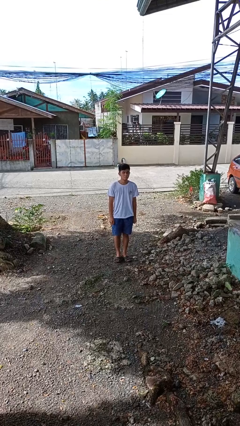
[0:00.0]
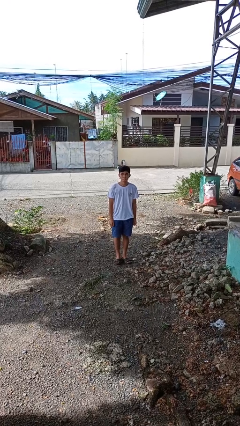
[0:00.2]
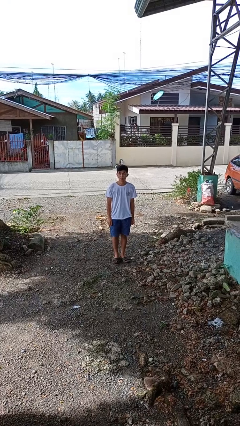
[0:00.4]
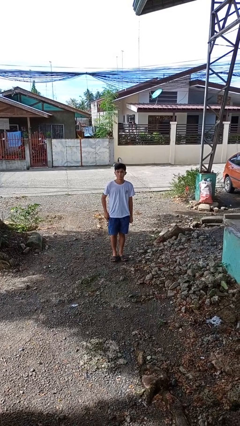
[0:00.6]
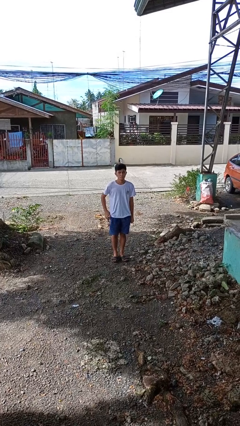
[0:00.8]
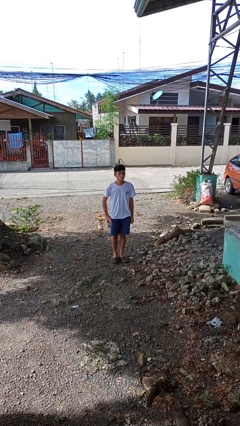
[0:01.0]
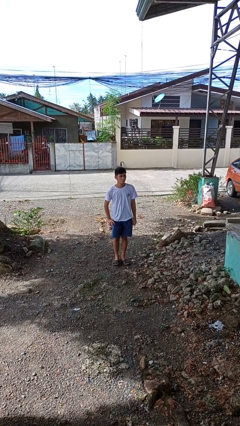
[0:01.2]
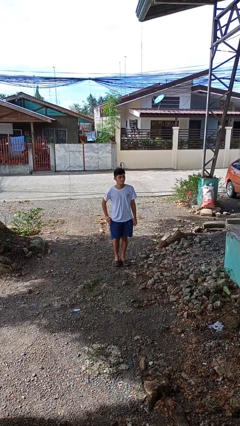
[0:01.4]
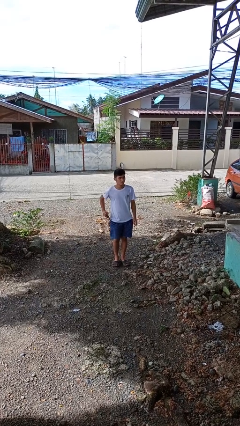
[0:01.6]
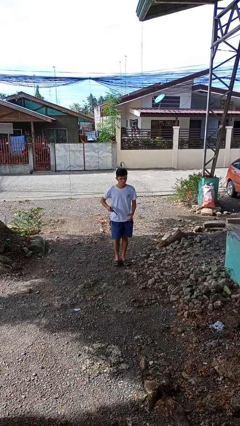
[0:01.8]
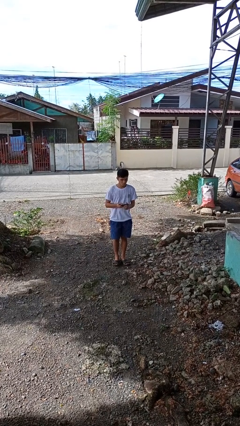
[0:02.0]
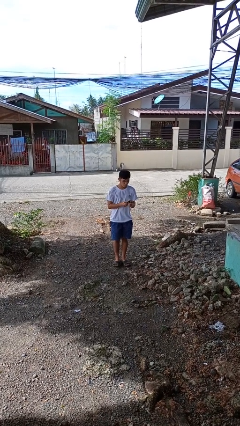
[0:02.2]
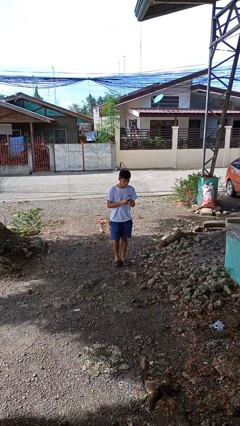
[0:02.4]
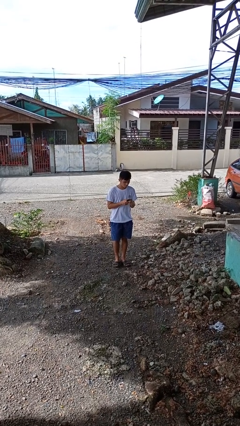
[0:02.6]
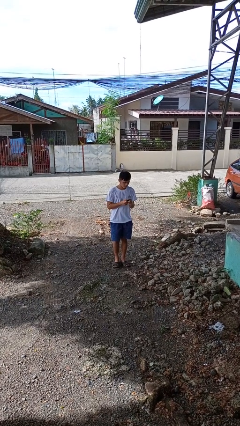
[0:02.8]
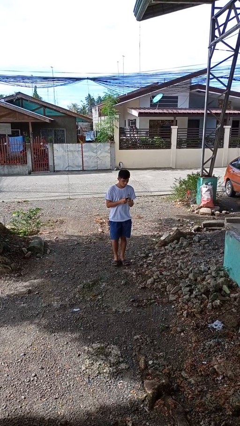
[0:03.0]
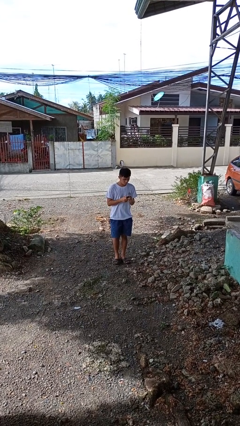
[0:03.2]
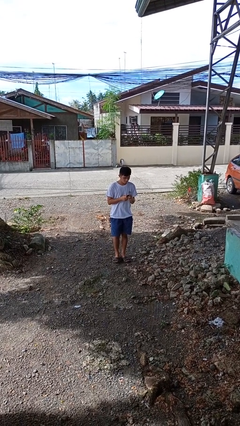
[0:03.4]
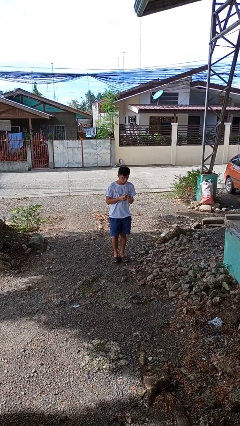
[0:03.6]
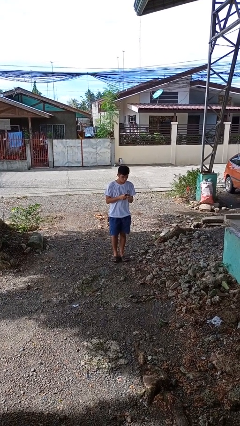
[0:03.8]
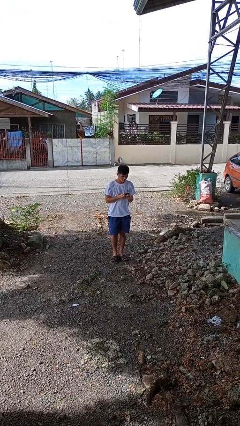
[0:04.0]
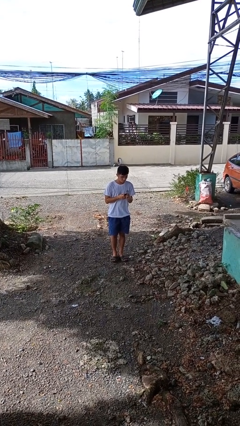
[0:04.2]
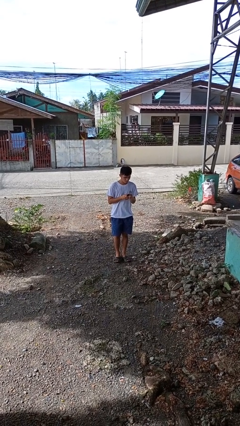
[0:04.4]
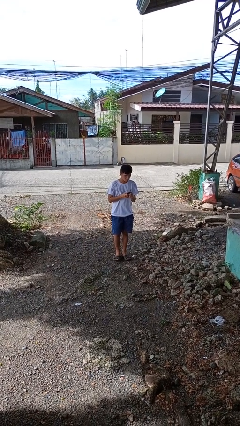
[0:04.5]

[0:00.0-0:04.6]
person takes phone from pocket

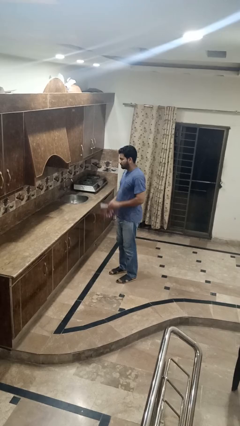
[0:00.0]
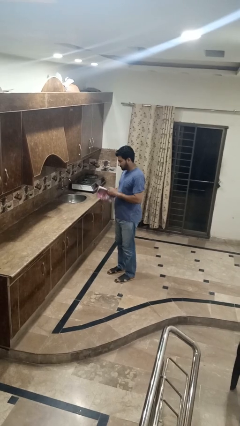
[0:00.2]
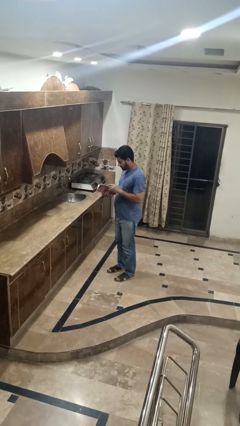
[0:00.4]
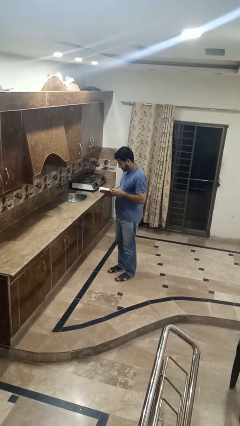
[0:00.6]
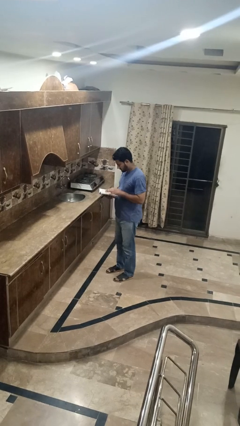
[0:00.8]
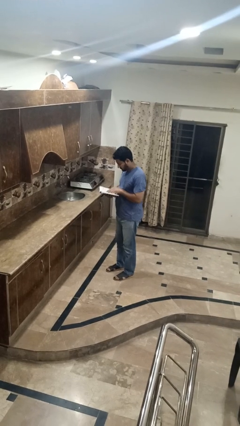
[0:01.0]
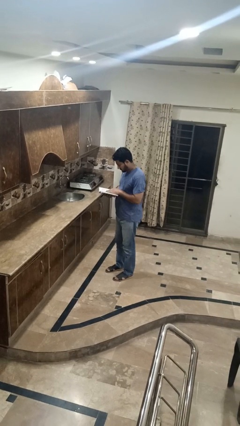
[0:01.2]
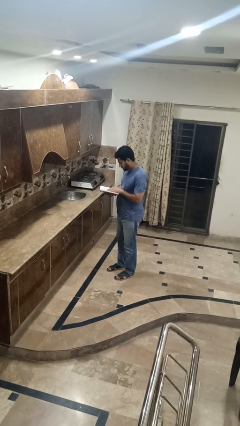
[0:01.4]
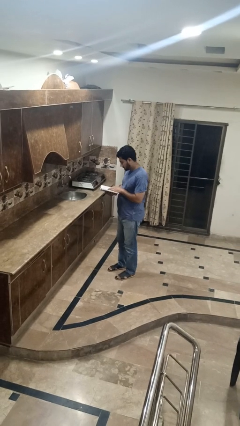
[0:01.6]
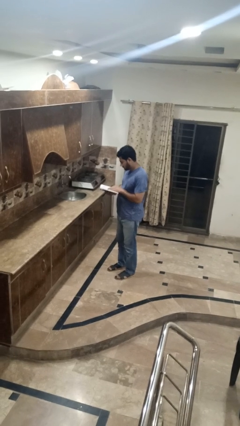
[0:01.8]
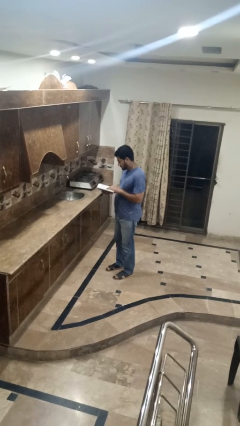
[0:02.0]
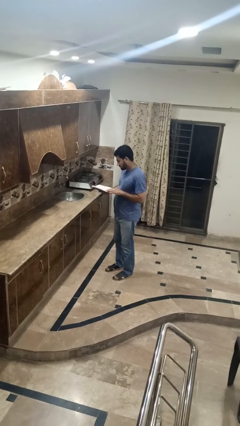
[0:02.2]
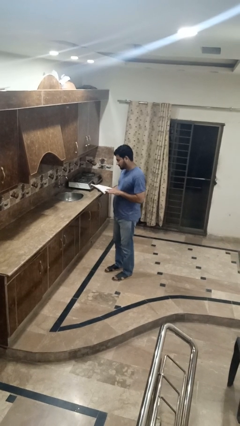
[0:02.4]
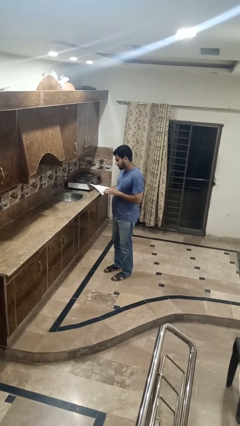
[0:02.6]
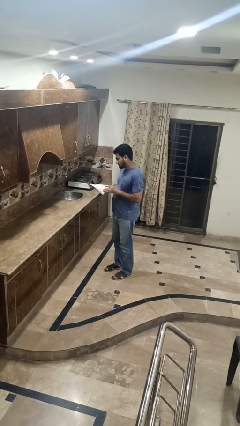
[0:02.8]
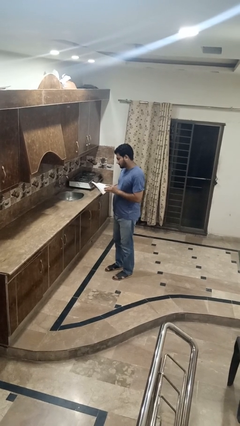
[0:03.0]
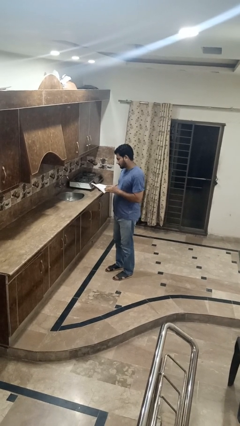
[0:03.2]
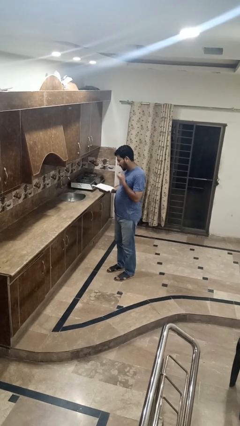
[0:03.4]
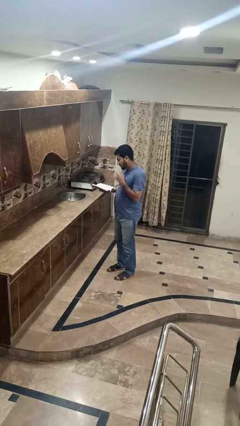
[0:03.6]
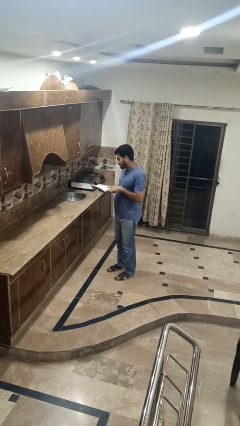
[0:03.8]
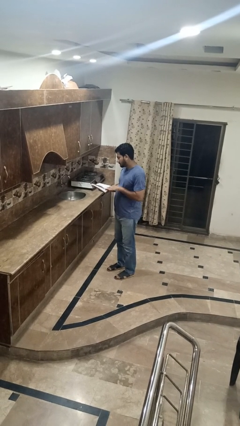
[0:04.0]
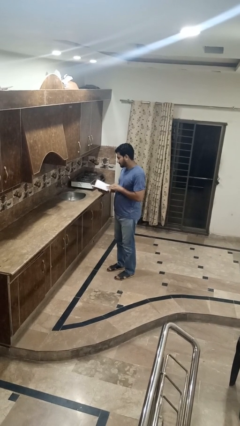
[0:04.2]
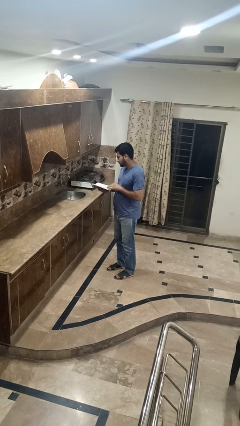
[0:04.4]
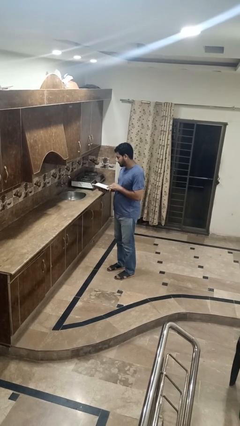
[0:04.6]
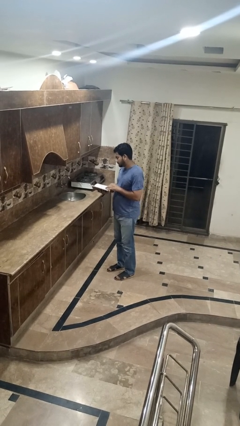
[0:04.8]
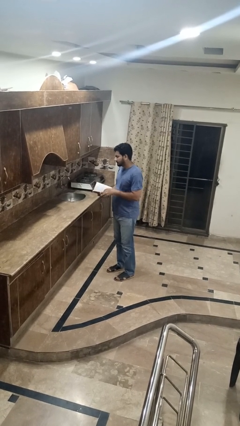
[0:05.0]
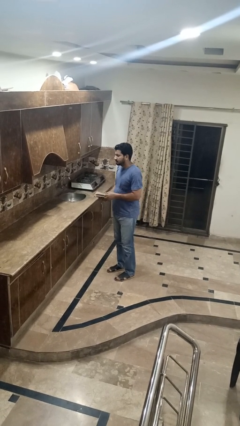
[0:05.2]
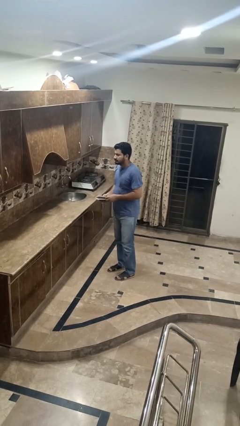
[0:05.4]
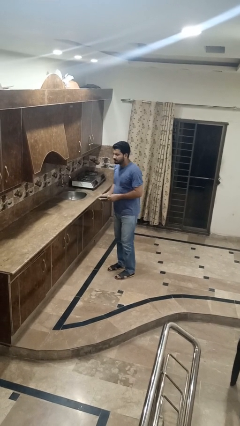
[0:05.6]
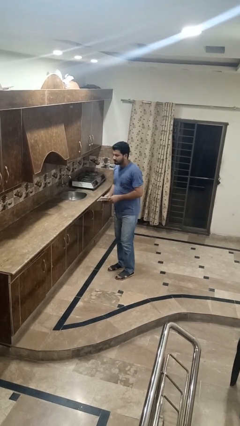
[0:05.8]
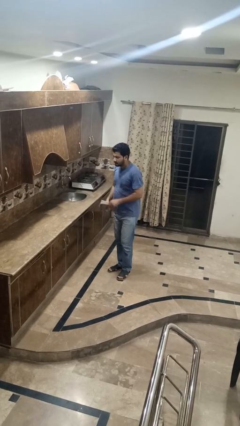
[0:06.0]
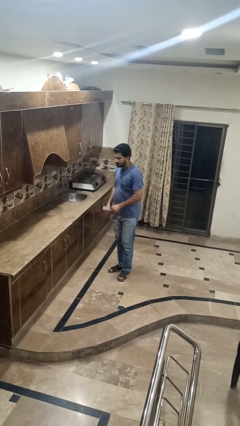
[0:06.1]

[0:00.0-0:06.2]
person reads book

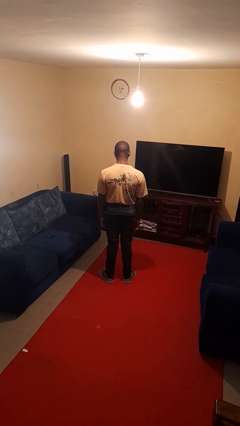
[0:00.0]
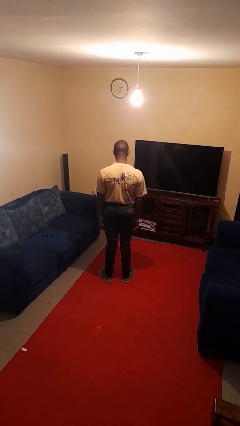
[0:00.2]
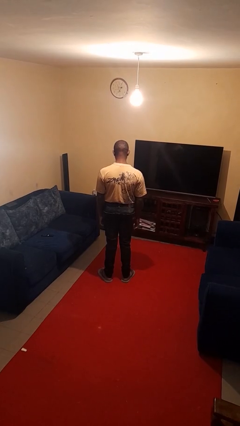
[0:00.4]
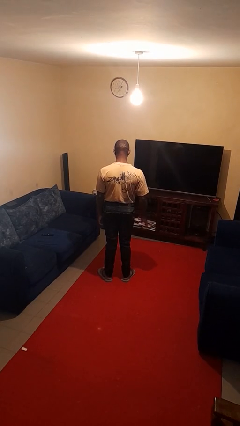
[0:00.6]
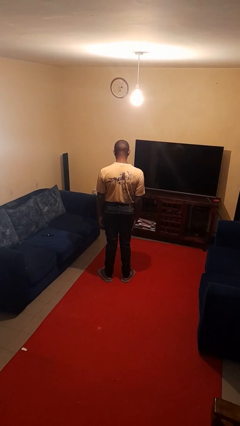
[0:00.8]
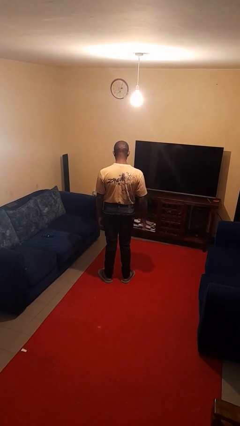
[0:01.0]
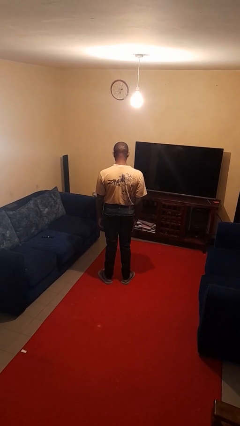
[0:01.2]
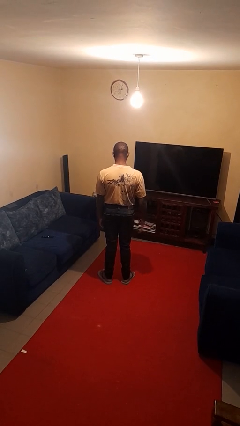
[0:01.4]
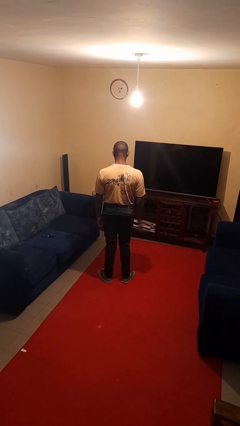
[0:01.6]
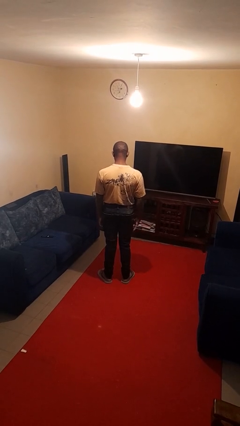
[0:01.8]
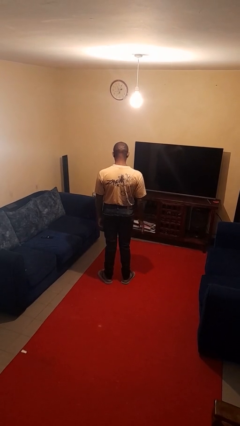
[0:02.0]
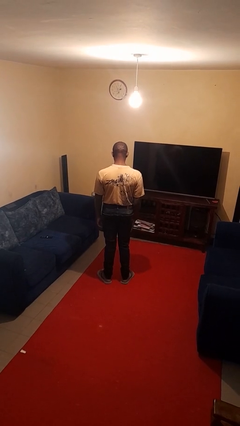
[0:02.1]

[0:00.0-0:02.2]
person slaps hands on thighs

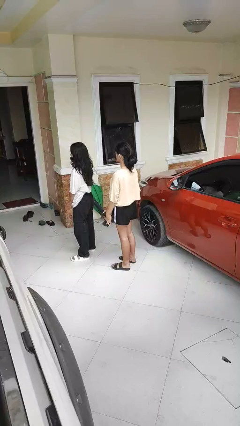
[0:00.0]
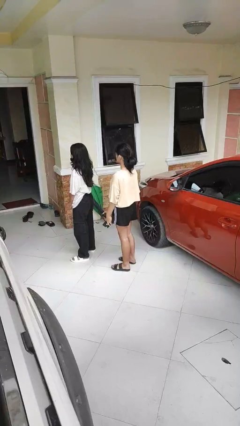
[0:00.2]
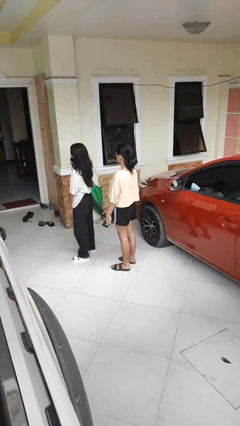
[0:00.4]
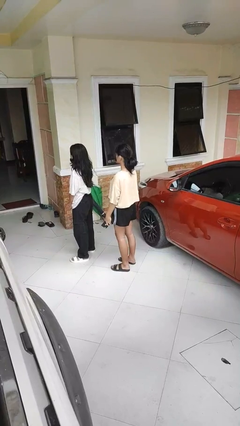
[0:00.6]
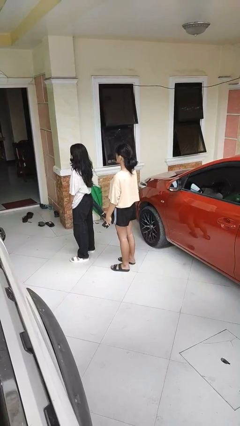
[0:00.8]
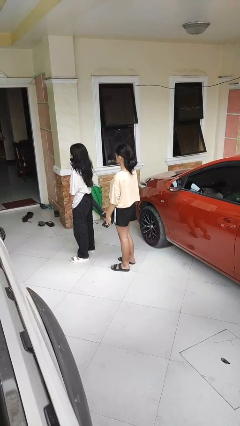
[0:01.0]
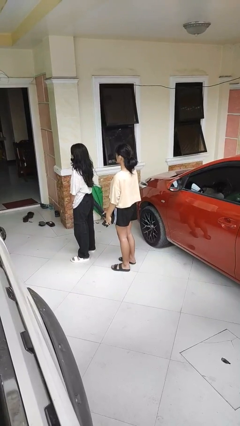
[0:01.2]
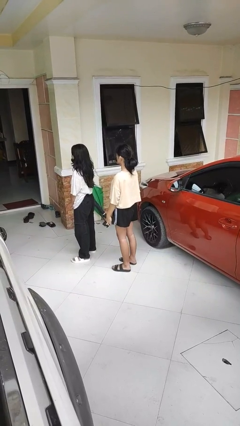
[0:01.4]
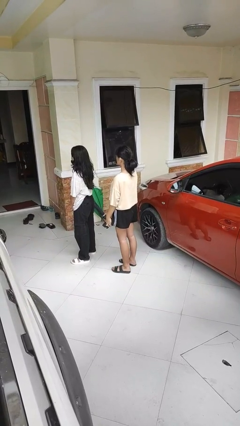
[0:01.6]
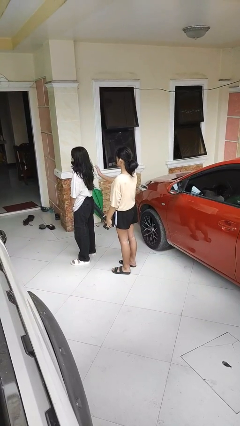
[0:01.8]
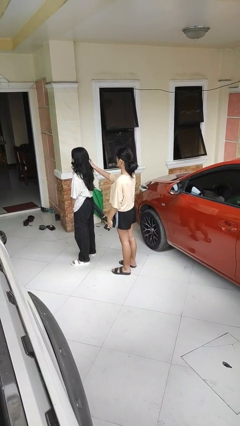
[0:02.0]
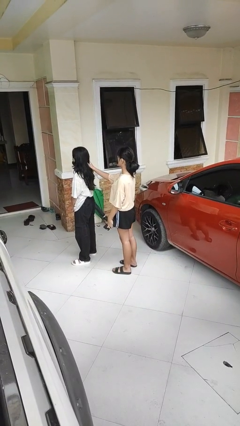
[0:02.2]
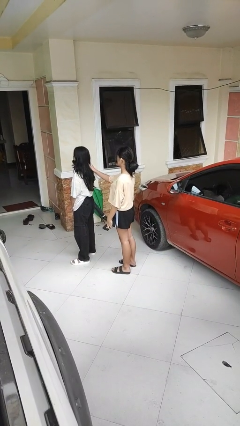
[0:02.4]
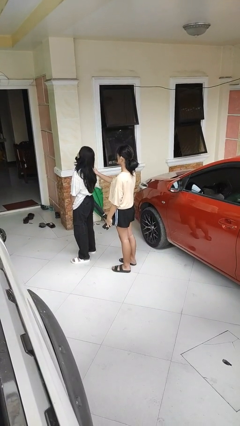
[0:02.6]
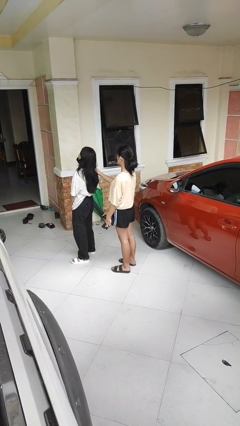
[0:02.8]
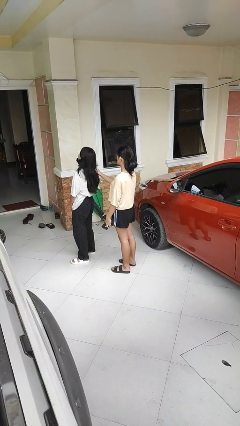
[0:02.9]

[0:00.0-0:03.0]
person grabs person by hair

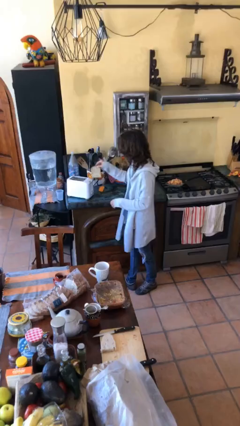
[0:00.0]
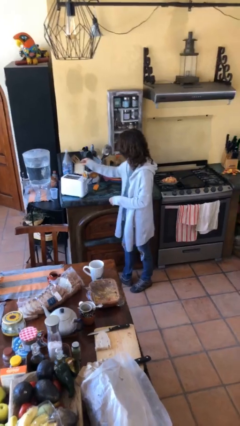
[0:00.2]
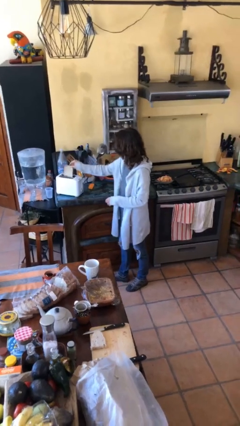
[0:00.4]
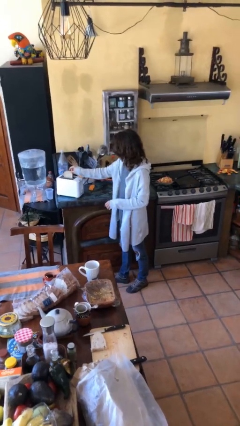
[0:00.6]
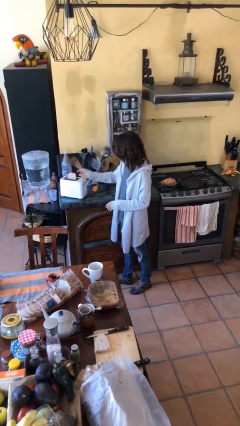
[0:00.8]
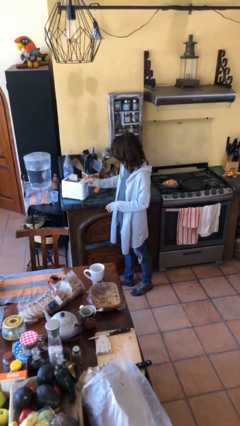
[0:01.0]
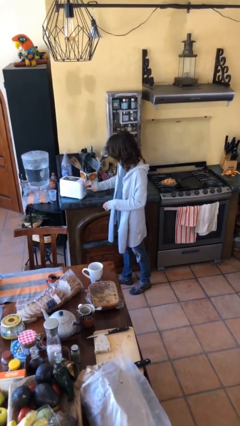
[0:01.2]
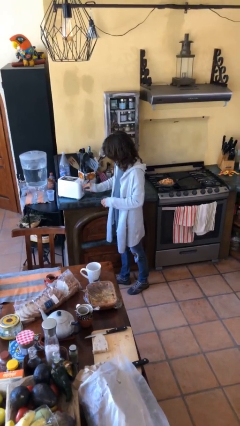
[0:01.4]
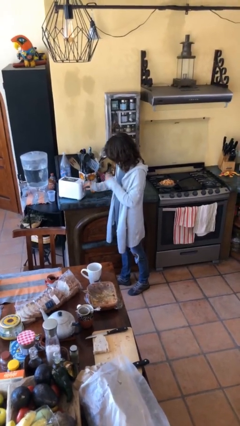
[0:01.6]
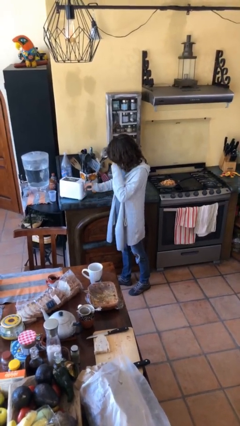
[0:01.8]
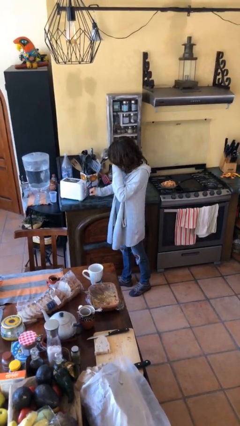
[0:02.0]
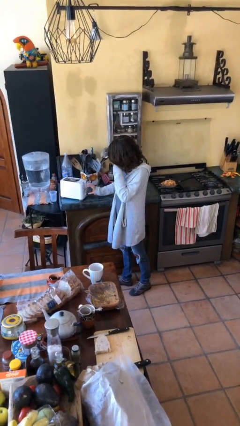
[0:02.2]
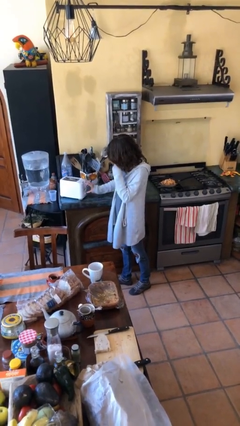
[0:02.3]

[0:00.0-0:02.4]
person puts object into toaster
